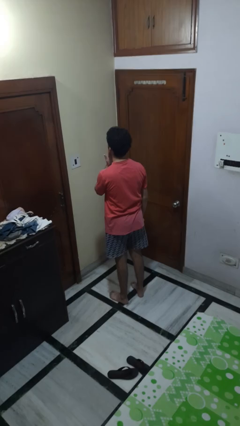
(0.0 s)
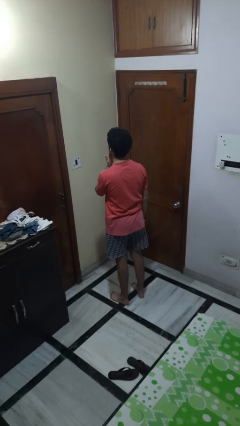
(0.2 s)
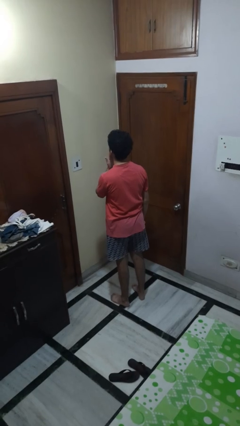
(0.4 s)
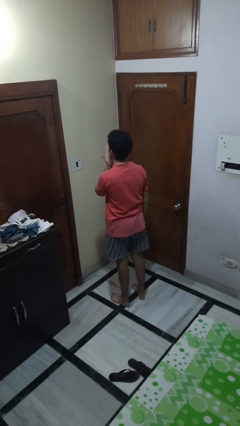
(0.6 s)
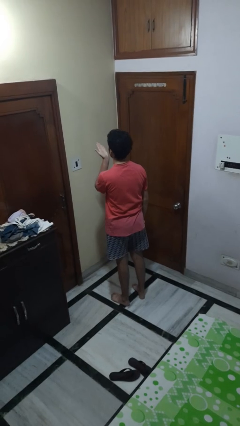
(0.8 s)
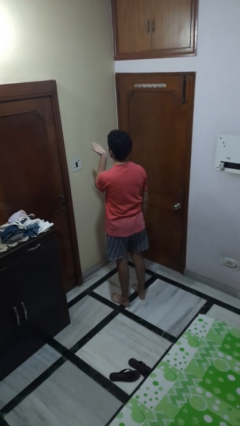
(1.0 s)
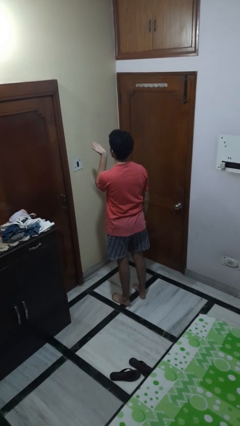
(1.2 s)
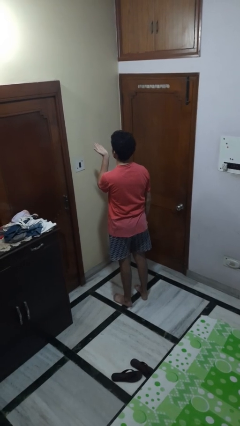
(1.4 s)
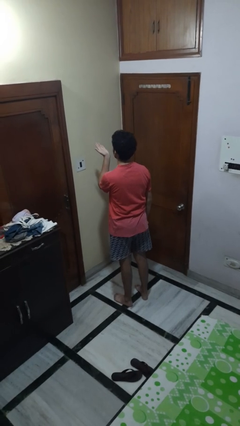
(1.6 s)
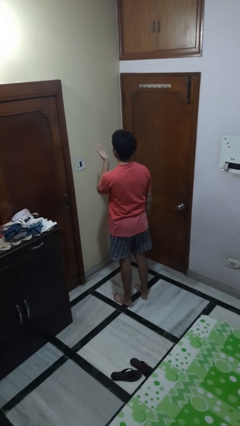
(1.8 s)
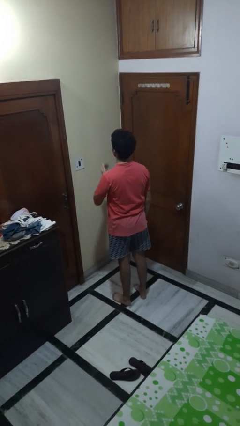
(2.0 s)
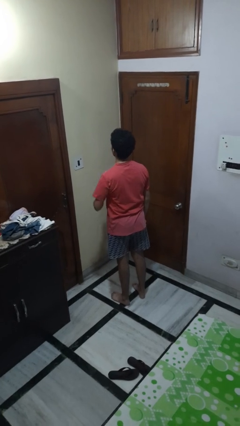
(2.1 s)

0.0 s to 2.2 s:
person gestures blow kiss

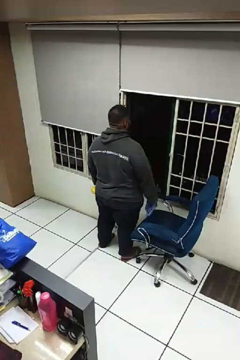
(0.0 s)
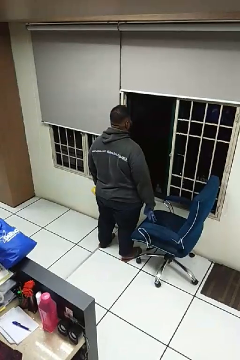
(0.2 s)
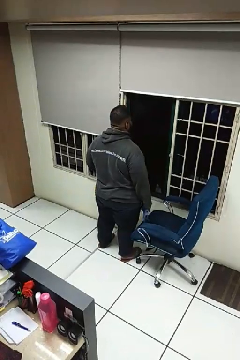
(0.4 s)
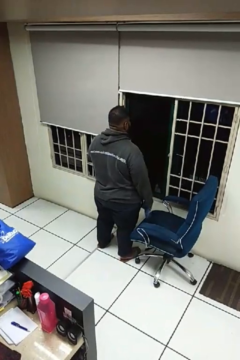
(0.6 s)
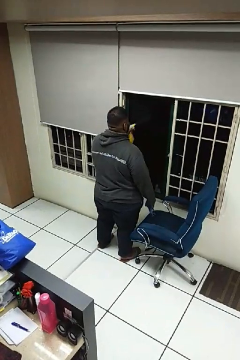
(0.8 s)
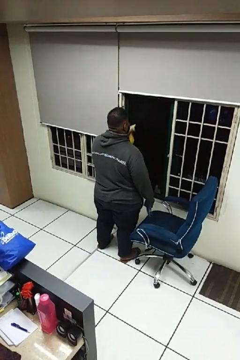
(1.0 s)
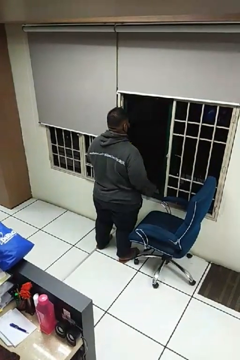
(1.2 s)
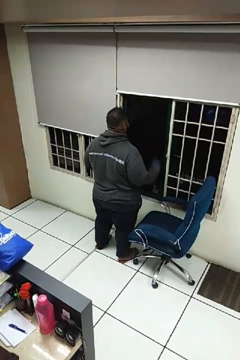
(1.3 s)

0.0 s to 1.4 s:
person sprays from bottle

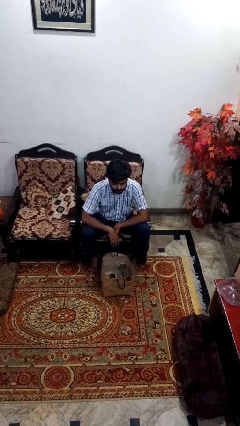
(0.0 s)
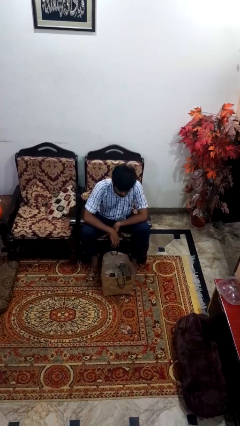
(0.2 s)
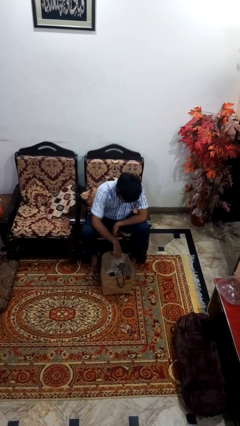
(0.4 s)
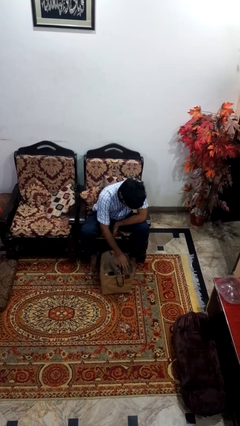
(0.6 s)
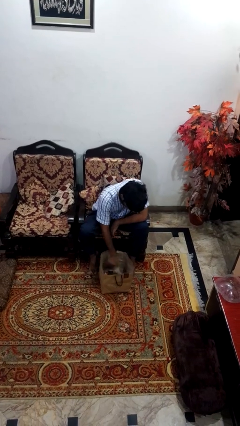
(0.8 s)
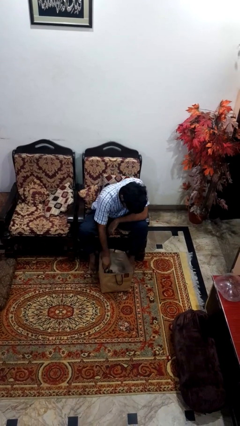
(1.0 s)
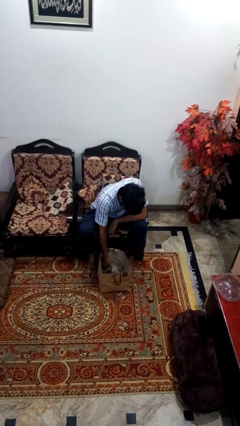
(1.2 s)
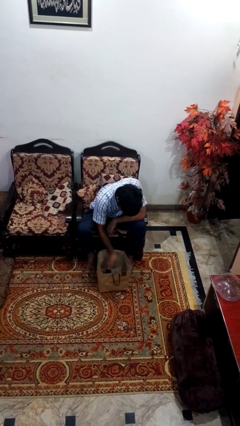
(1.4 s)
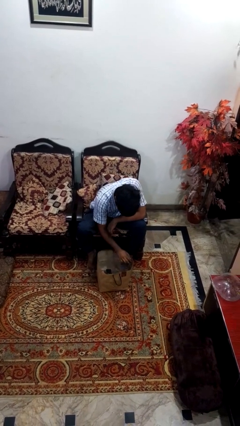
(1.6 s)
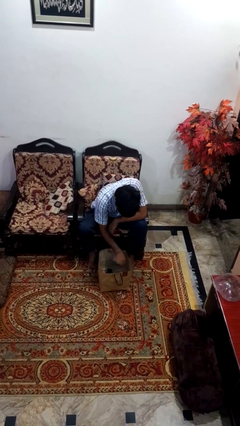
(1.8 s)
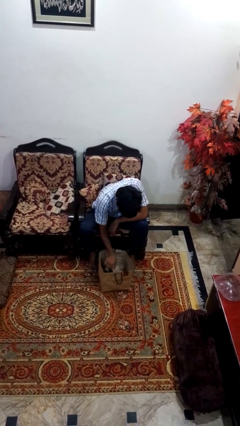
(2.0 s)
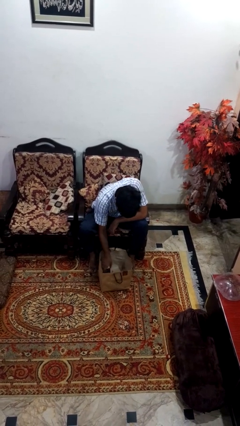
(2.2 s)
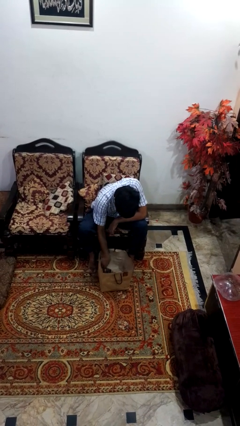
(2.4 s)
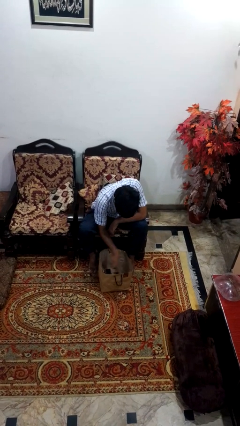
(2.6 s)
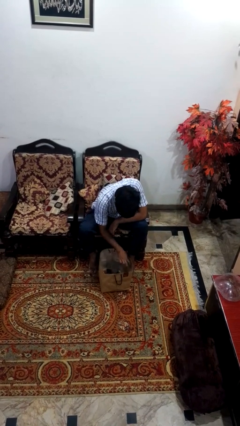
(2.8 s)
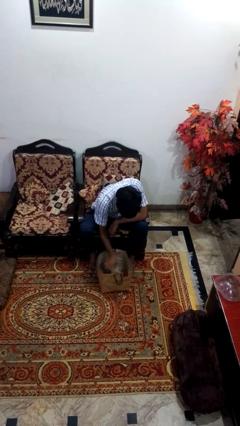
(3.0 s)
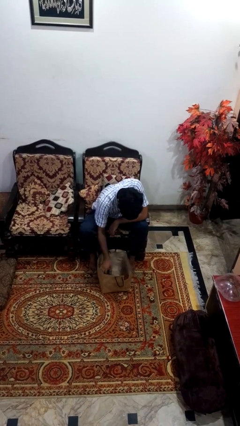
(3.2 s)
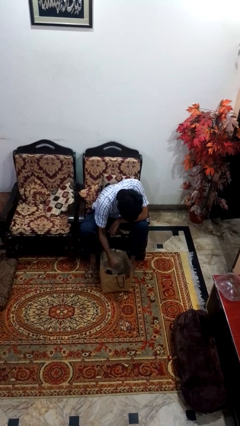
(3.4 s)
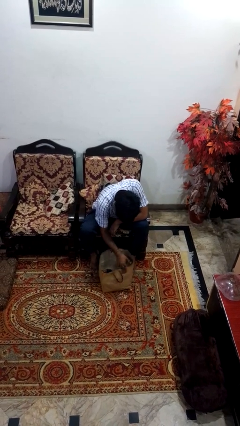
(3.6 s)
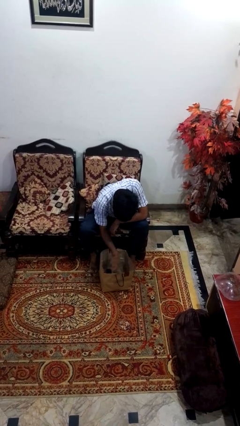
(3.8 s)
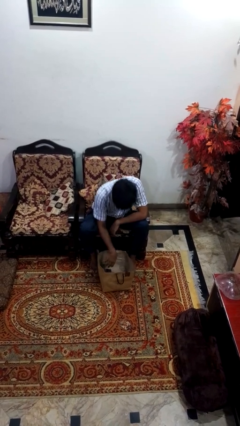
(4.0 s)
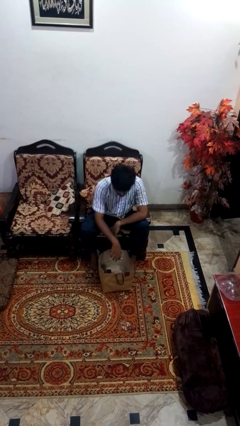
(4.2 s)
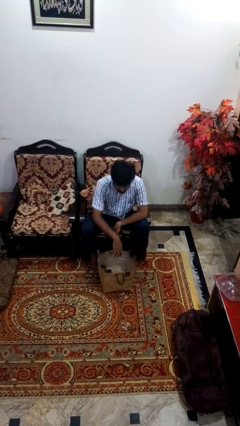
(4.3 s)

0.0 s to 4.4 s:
person searches in bag

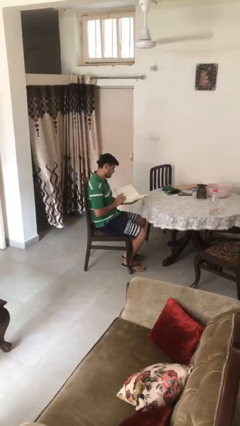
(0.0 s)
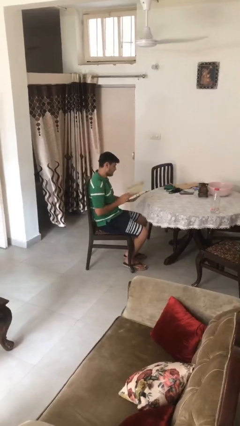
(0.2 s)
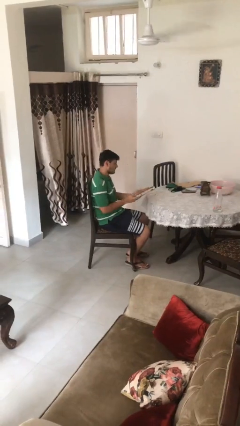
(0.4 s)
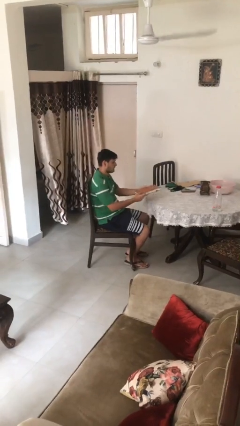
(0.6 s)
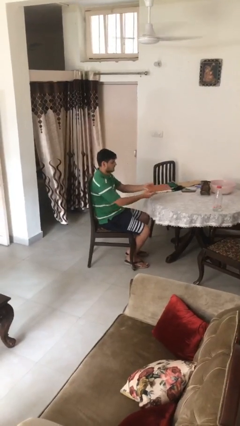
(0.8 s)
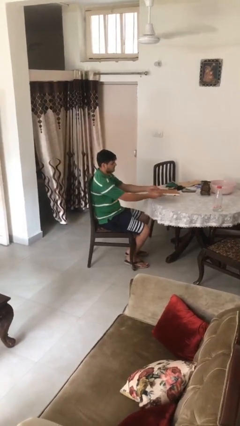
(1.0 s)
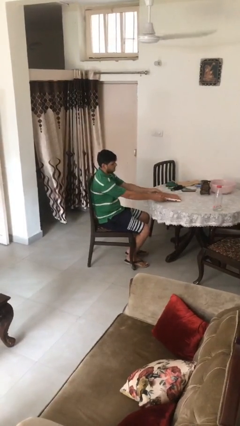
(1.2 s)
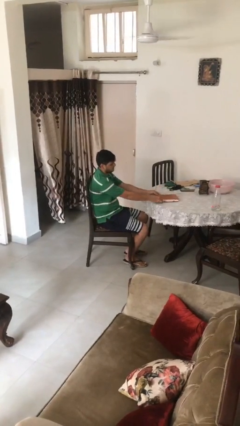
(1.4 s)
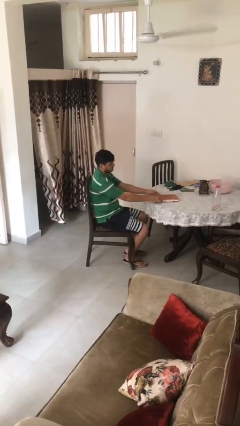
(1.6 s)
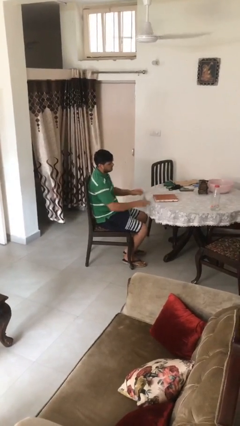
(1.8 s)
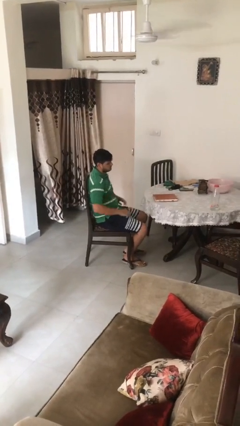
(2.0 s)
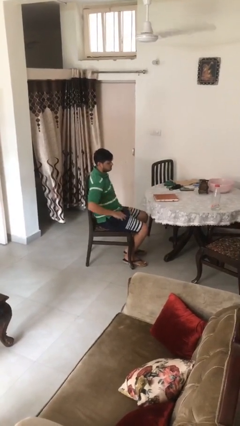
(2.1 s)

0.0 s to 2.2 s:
person puts down object on table

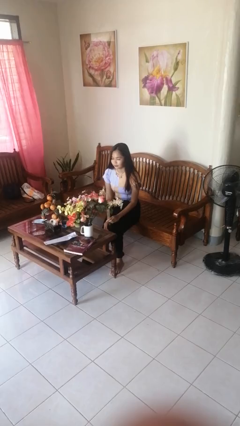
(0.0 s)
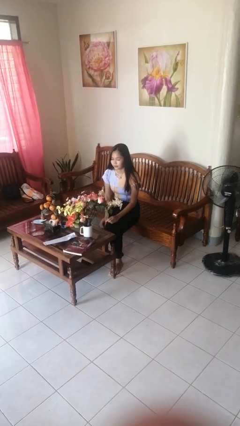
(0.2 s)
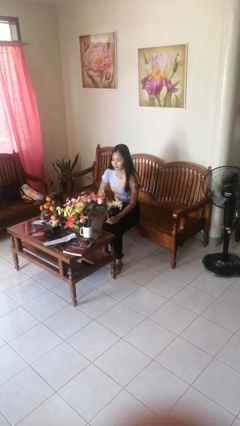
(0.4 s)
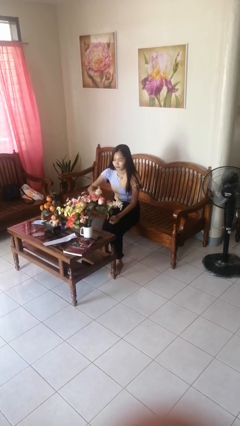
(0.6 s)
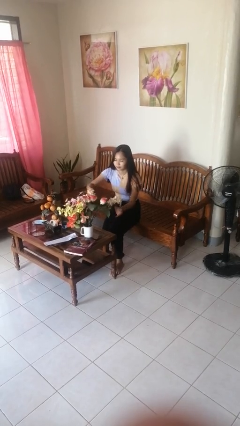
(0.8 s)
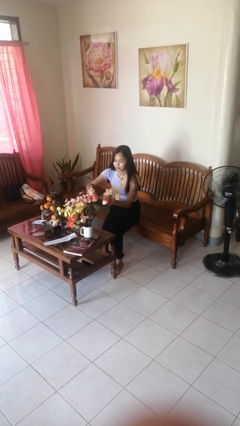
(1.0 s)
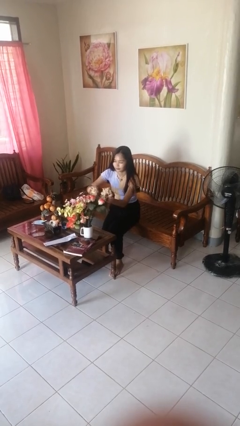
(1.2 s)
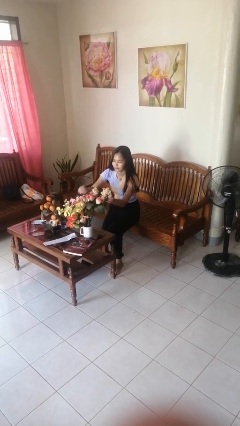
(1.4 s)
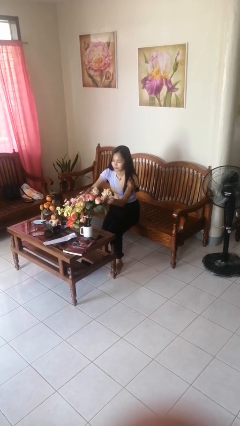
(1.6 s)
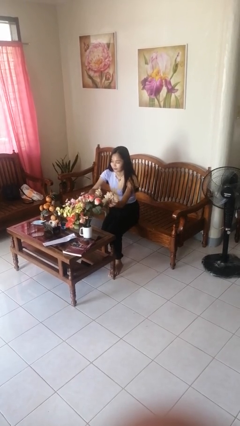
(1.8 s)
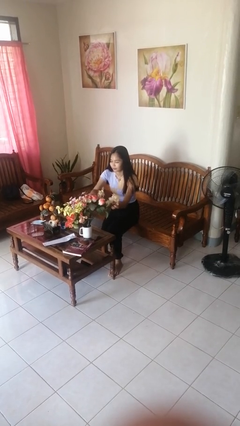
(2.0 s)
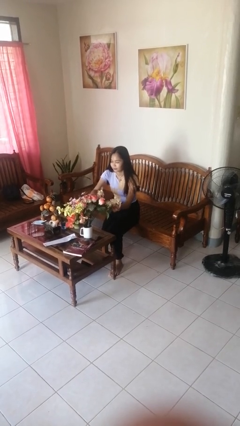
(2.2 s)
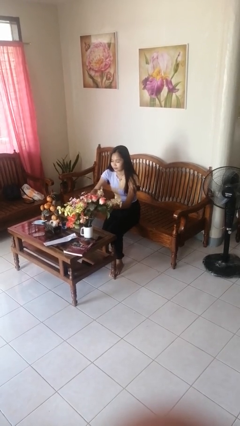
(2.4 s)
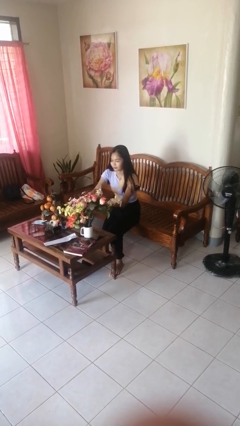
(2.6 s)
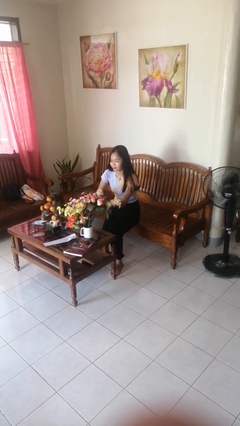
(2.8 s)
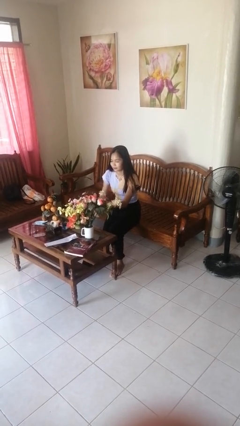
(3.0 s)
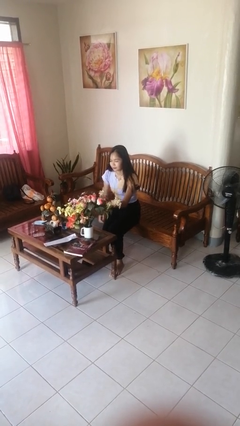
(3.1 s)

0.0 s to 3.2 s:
person arranges flowers in vase

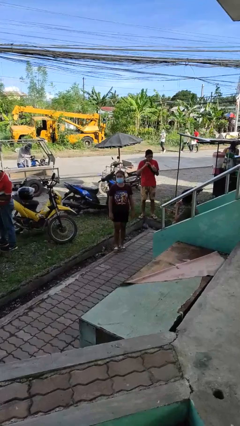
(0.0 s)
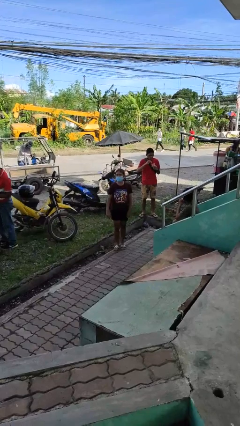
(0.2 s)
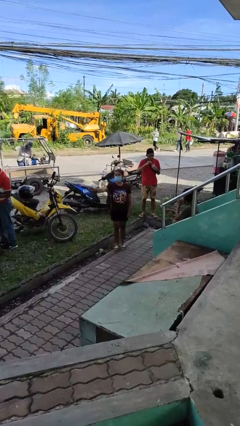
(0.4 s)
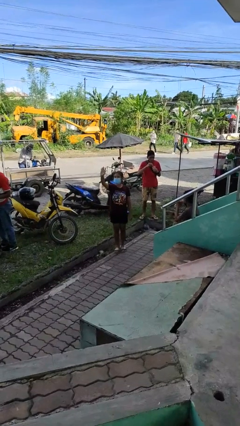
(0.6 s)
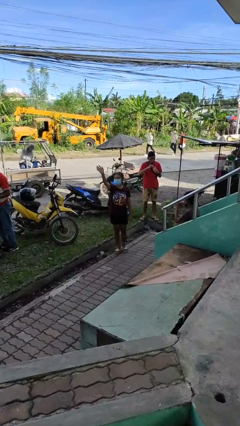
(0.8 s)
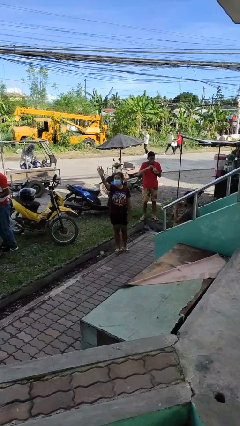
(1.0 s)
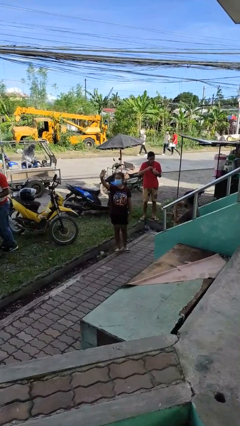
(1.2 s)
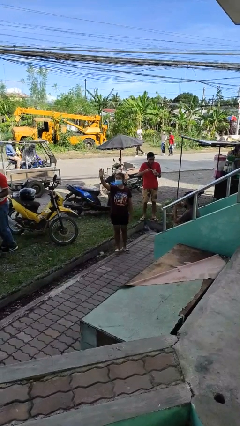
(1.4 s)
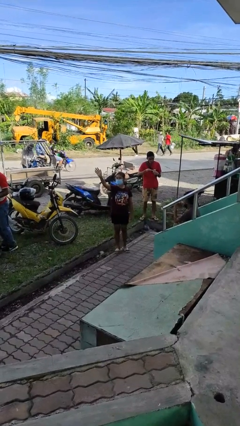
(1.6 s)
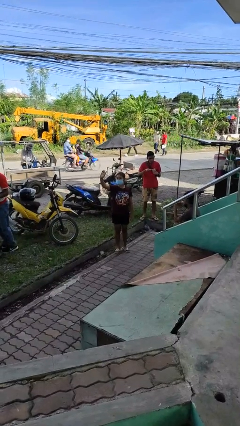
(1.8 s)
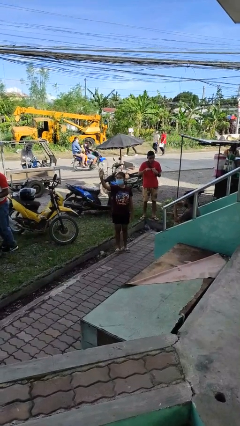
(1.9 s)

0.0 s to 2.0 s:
person waves at person

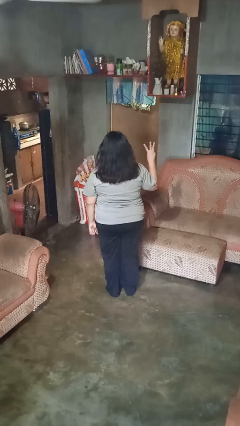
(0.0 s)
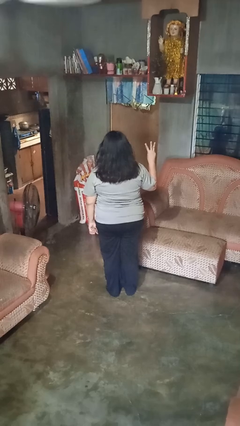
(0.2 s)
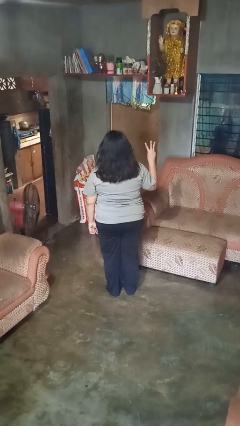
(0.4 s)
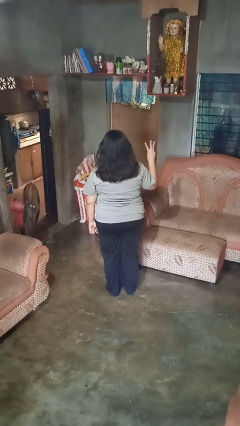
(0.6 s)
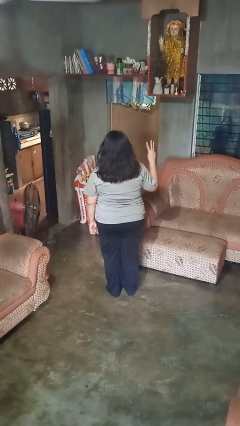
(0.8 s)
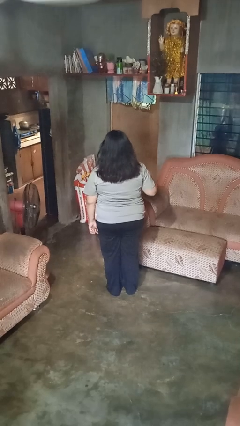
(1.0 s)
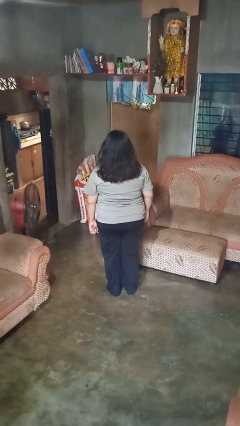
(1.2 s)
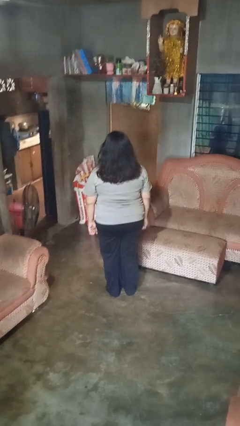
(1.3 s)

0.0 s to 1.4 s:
person gestures number three

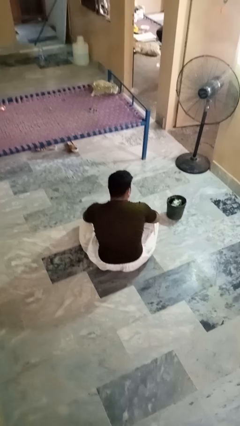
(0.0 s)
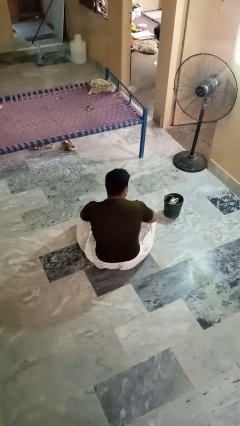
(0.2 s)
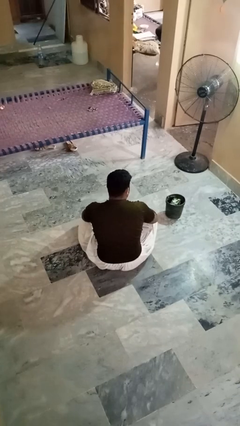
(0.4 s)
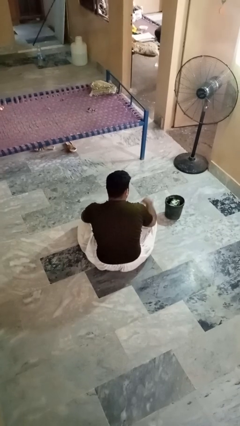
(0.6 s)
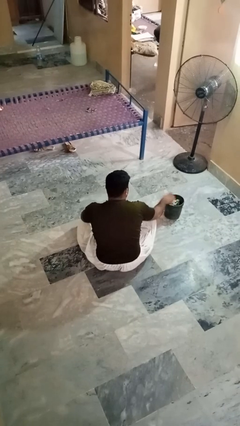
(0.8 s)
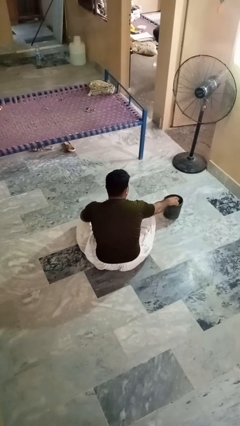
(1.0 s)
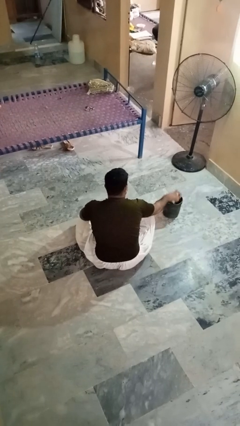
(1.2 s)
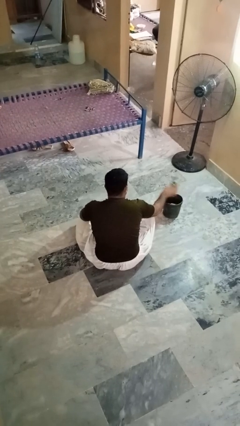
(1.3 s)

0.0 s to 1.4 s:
person takes object from basket
